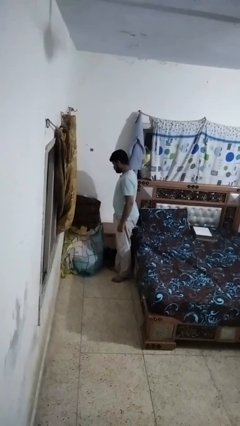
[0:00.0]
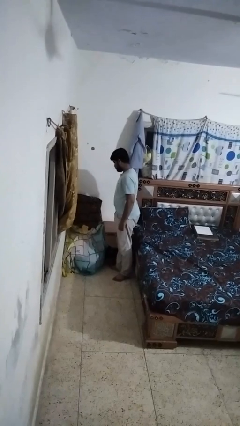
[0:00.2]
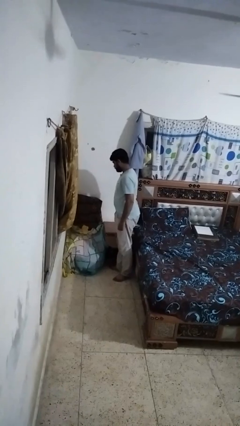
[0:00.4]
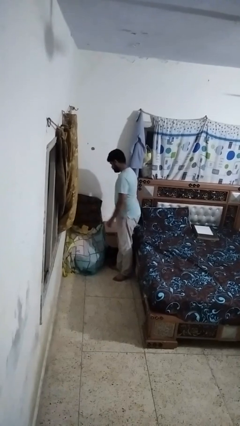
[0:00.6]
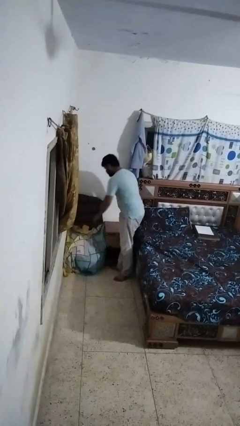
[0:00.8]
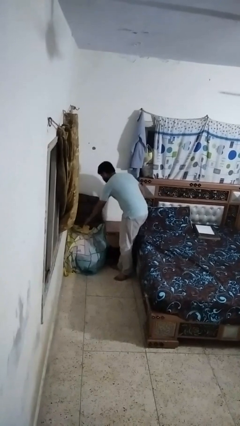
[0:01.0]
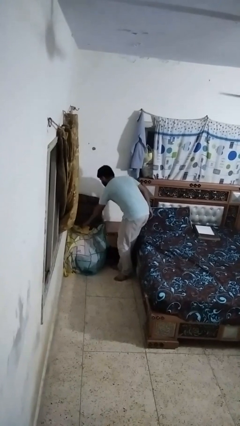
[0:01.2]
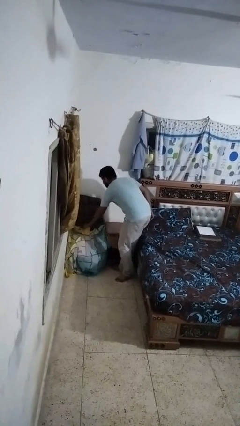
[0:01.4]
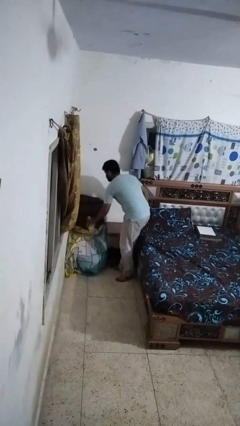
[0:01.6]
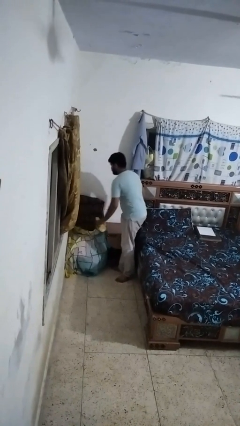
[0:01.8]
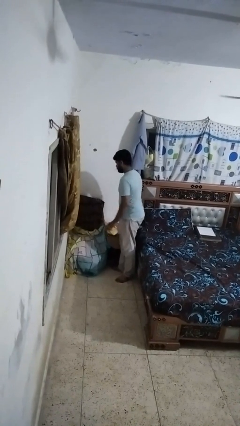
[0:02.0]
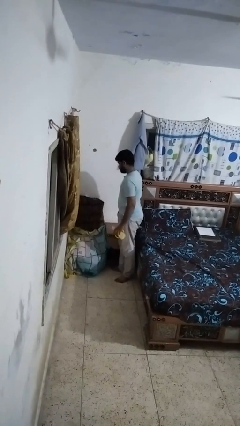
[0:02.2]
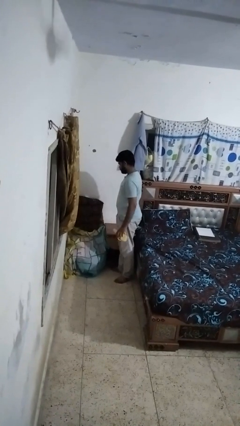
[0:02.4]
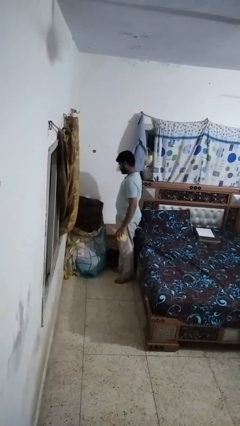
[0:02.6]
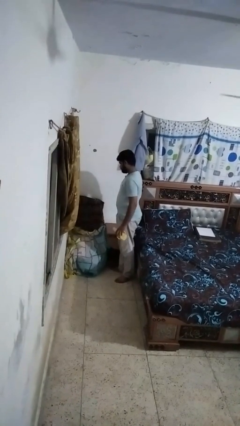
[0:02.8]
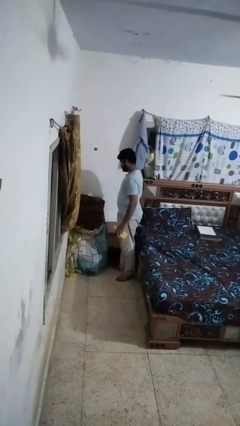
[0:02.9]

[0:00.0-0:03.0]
person picks up object from couch

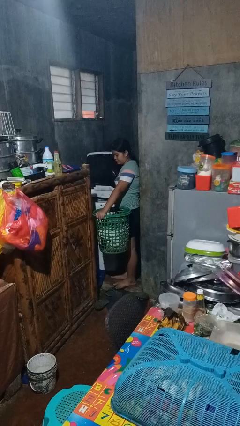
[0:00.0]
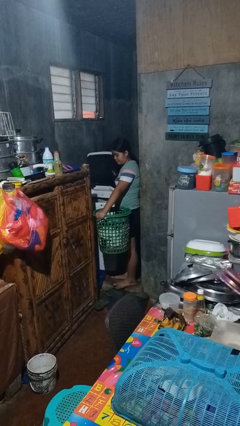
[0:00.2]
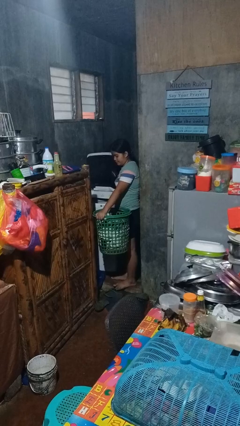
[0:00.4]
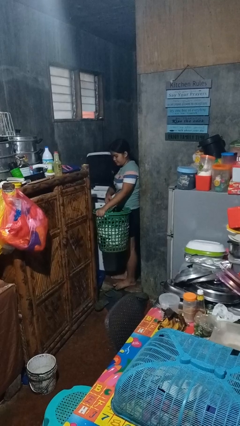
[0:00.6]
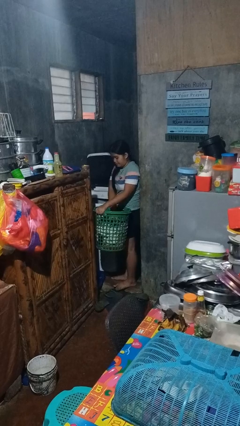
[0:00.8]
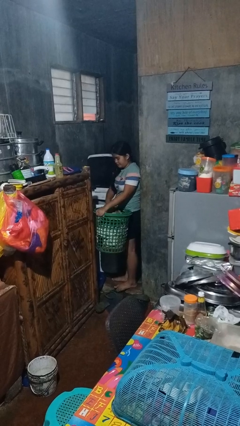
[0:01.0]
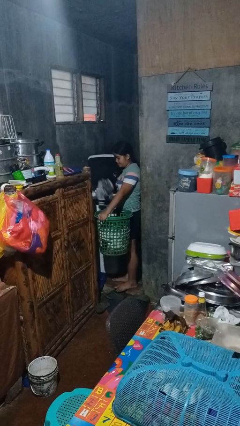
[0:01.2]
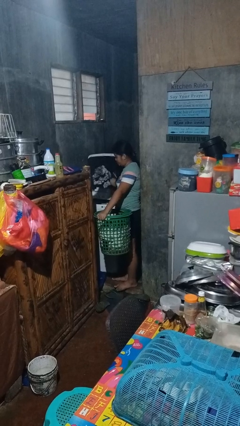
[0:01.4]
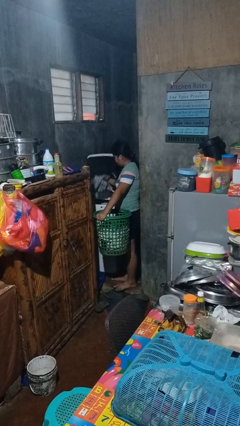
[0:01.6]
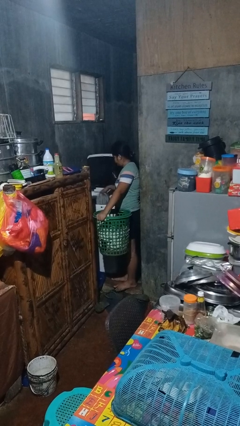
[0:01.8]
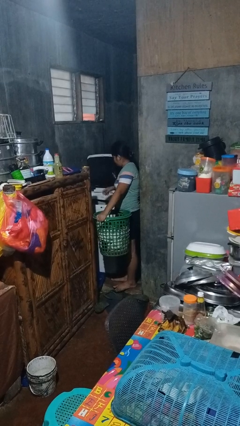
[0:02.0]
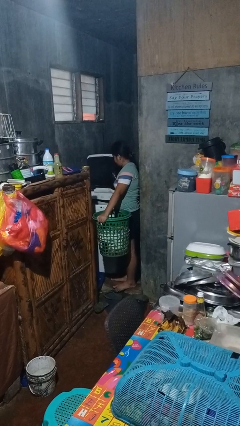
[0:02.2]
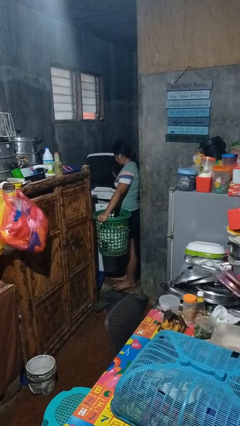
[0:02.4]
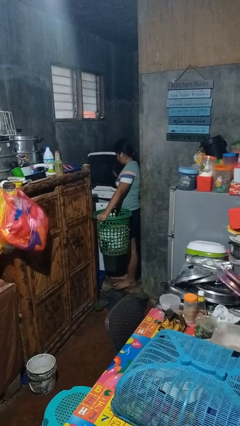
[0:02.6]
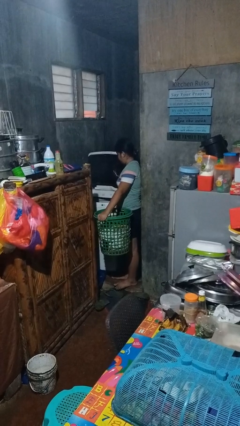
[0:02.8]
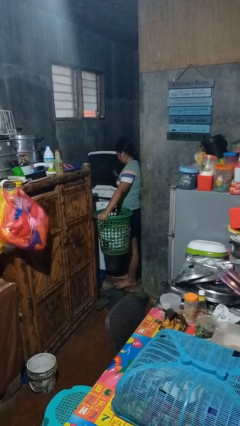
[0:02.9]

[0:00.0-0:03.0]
person loads clotheswasher

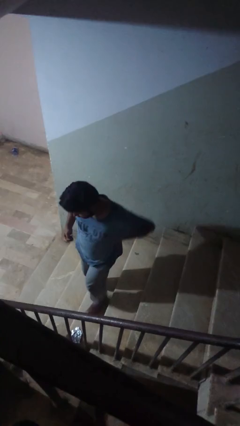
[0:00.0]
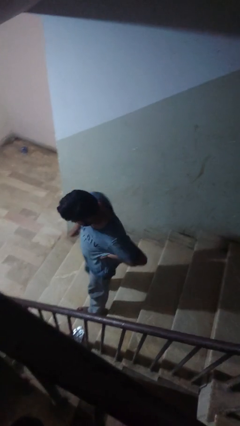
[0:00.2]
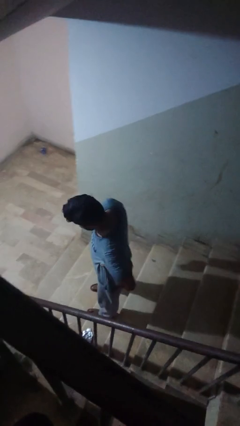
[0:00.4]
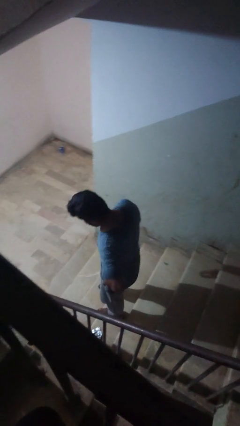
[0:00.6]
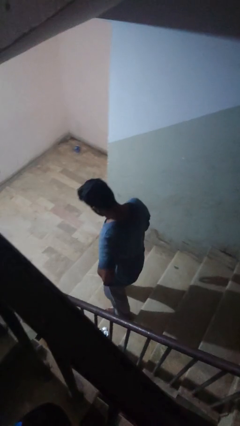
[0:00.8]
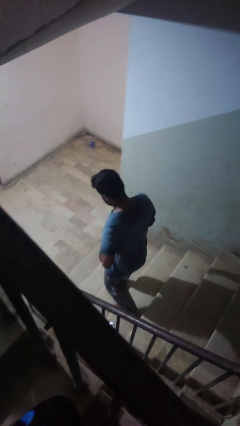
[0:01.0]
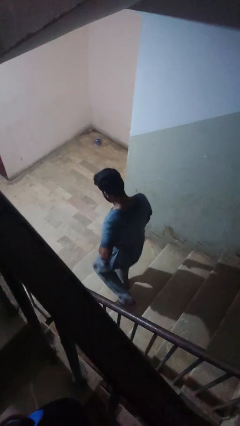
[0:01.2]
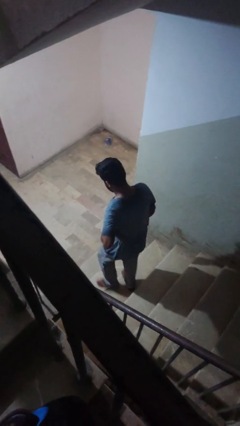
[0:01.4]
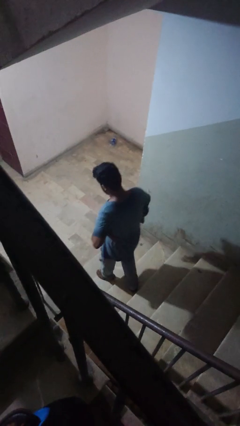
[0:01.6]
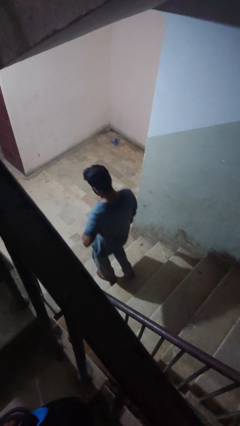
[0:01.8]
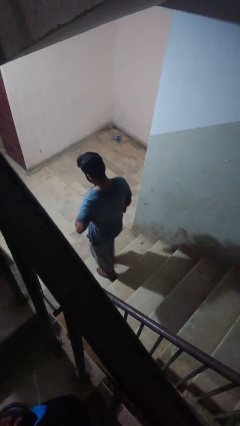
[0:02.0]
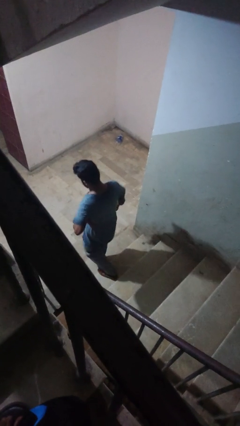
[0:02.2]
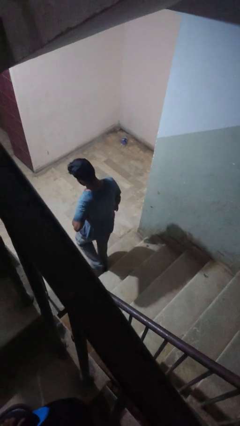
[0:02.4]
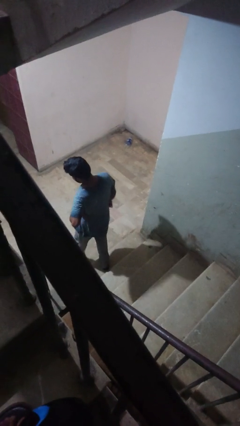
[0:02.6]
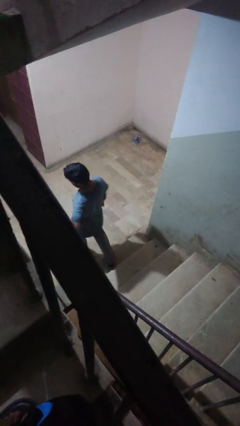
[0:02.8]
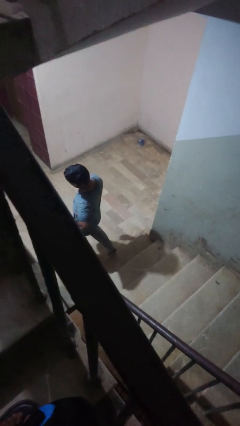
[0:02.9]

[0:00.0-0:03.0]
person climbs down stairs

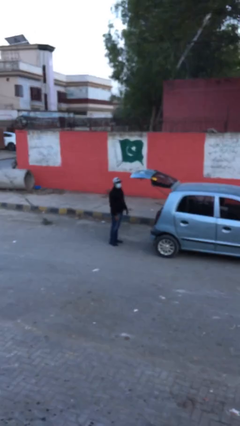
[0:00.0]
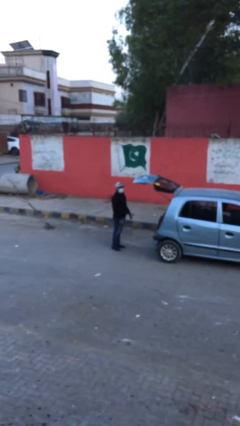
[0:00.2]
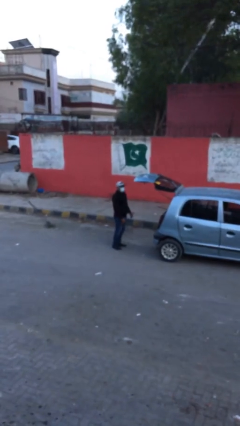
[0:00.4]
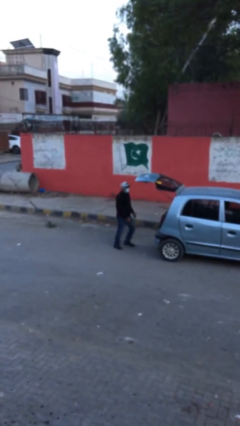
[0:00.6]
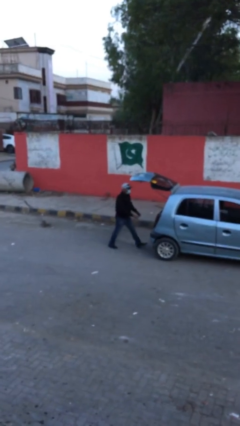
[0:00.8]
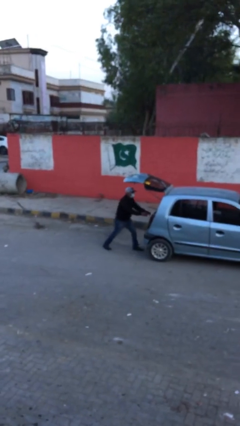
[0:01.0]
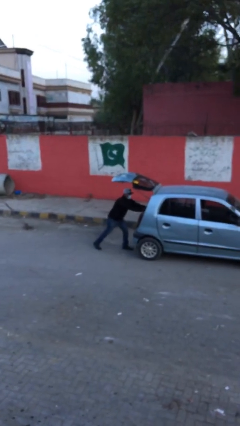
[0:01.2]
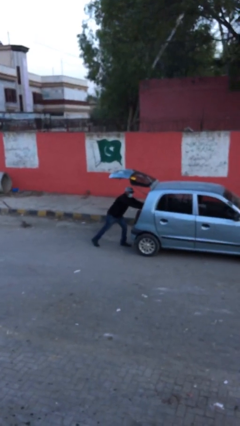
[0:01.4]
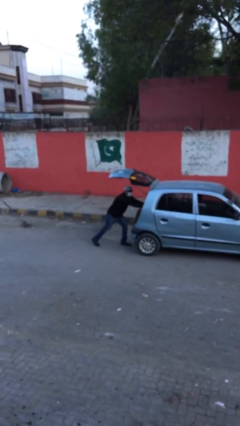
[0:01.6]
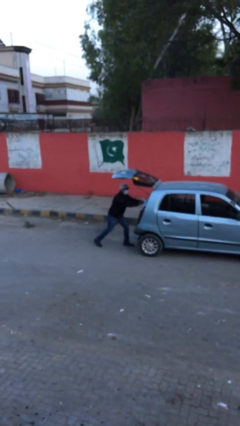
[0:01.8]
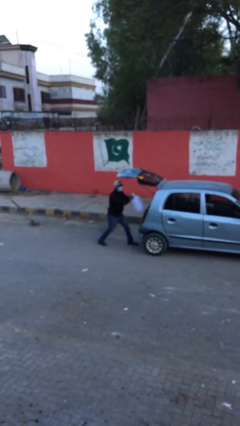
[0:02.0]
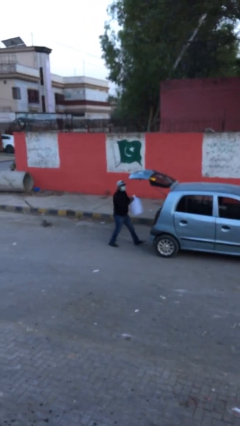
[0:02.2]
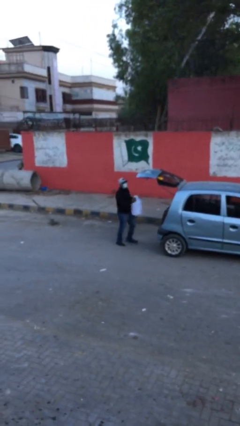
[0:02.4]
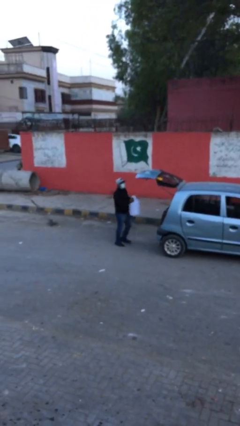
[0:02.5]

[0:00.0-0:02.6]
person unloads car

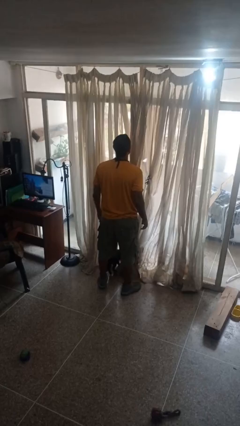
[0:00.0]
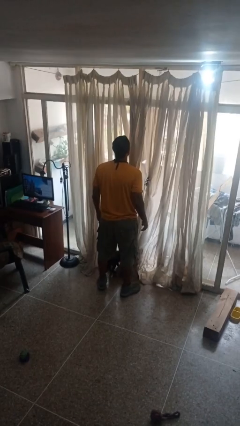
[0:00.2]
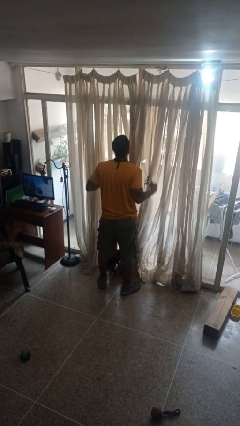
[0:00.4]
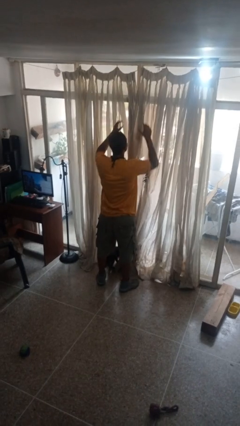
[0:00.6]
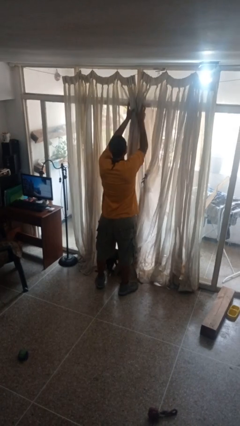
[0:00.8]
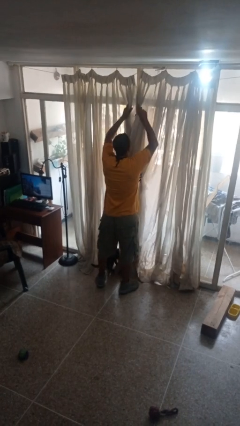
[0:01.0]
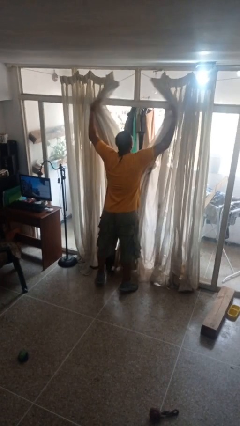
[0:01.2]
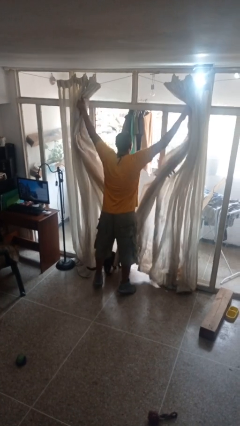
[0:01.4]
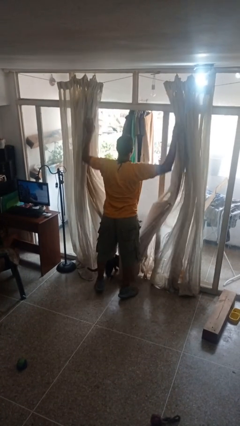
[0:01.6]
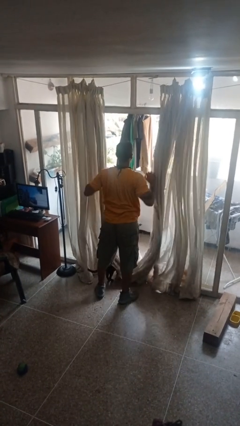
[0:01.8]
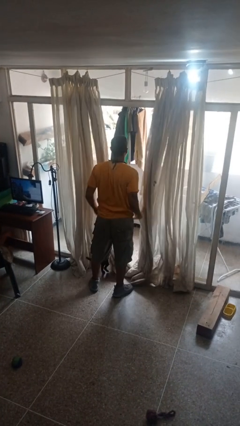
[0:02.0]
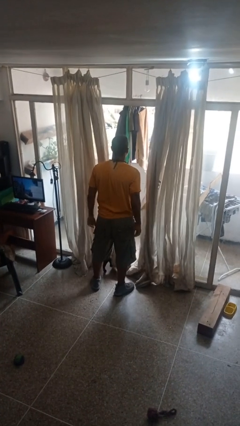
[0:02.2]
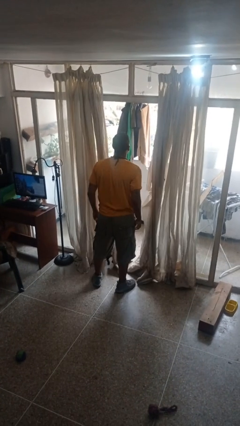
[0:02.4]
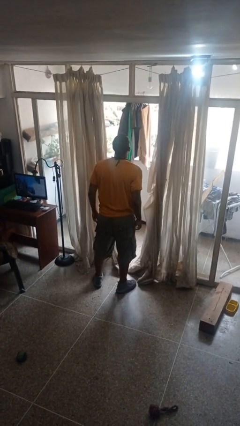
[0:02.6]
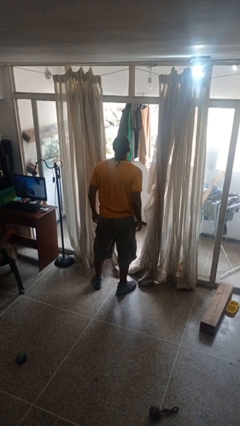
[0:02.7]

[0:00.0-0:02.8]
person opens curtains

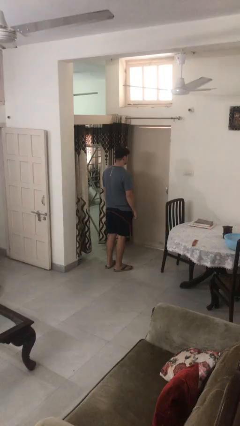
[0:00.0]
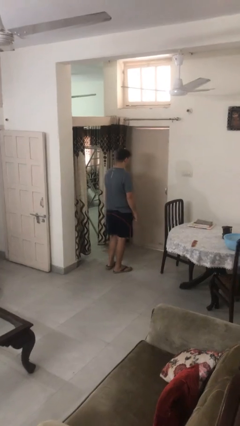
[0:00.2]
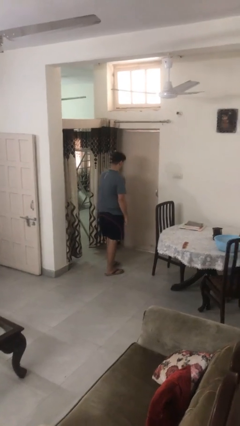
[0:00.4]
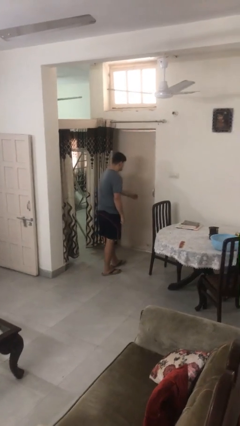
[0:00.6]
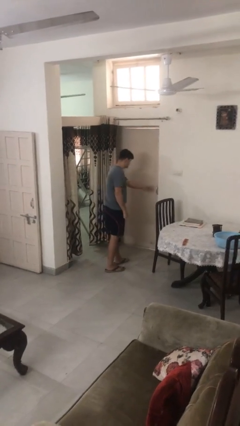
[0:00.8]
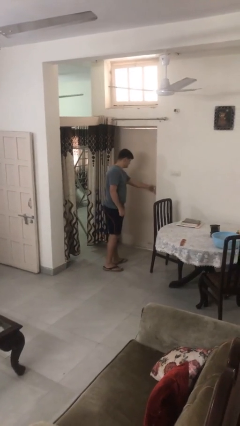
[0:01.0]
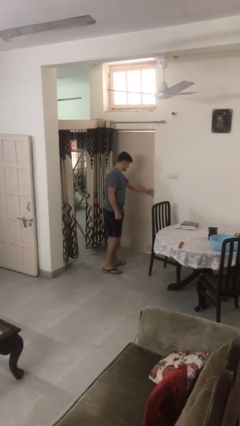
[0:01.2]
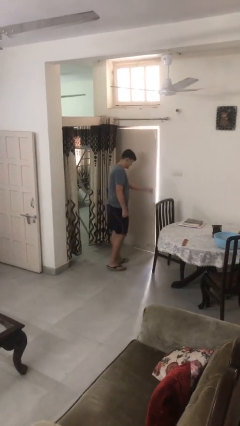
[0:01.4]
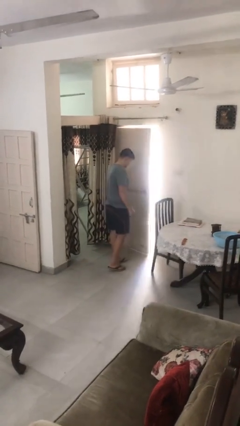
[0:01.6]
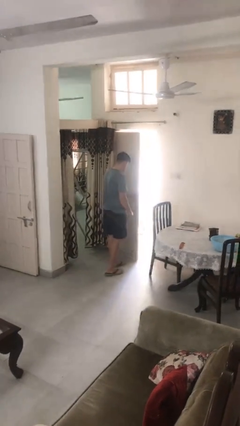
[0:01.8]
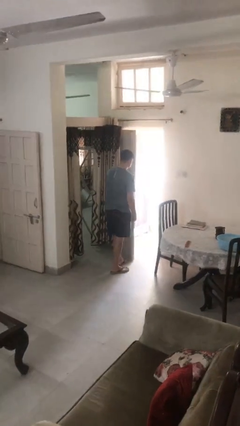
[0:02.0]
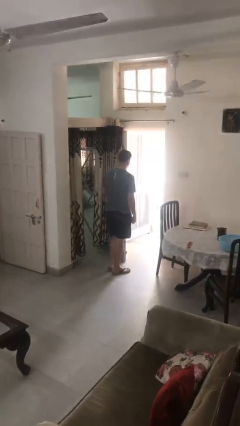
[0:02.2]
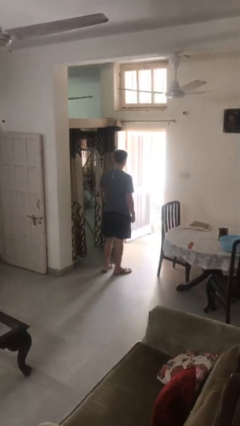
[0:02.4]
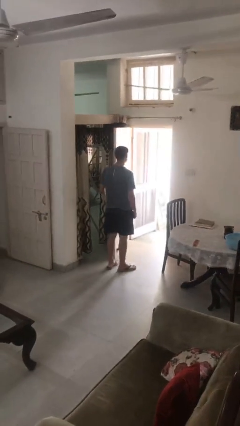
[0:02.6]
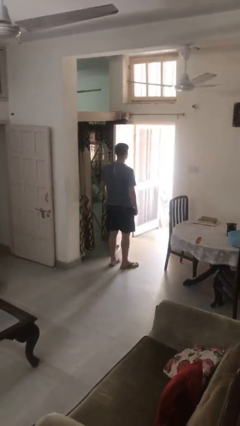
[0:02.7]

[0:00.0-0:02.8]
person opens facility door
